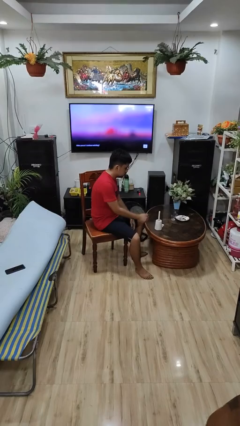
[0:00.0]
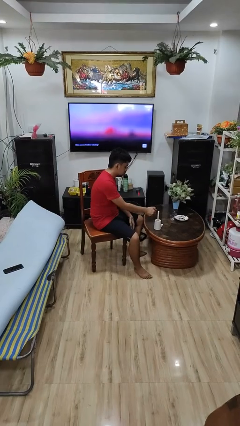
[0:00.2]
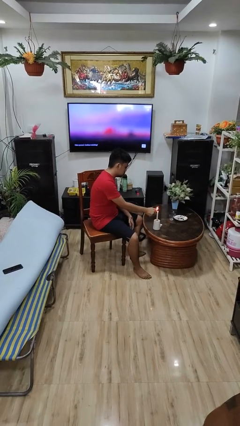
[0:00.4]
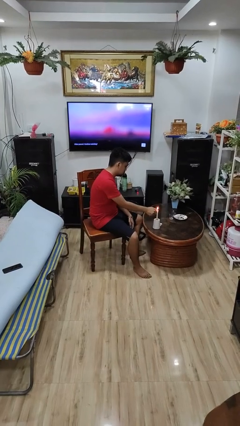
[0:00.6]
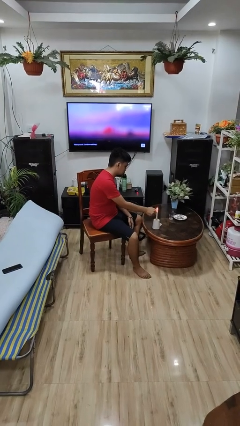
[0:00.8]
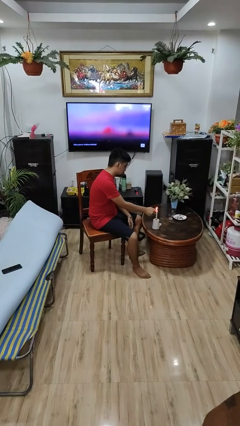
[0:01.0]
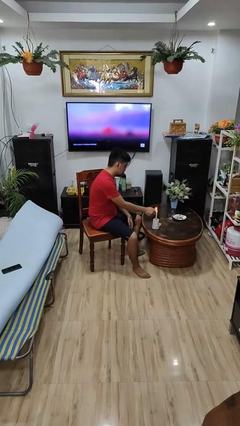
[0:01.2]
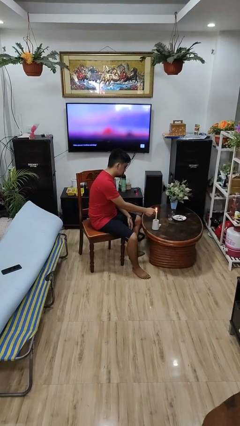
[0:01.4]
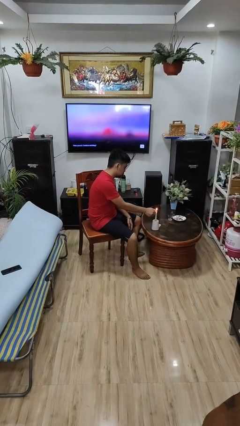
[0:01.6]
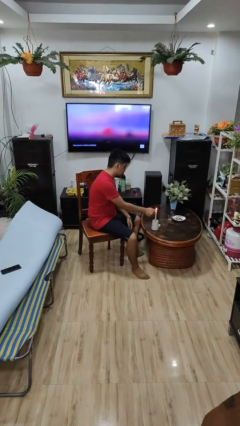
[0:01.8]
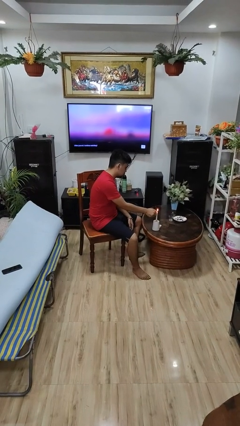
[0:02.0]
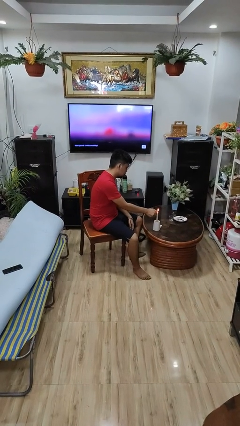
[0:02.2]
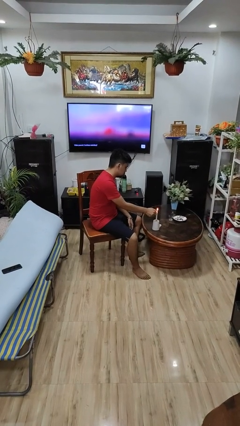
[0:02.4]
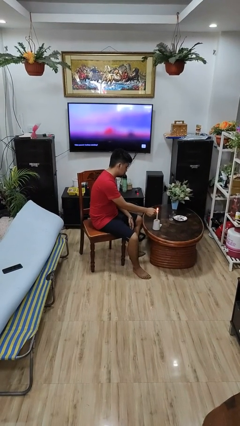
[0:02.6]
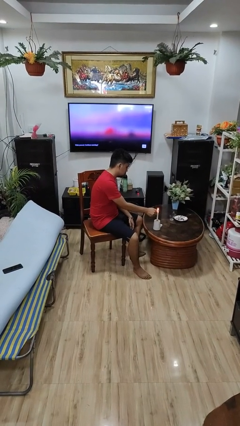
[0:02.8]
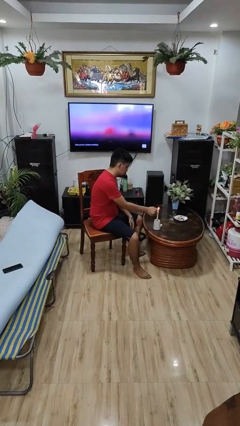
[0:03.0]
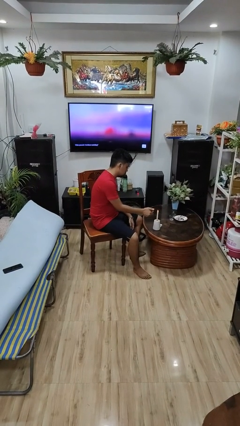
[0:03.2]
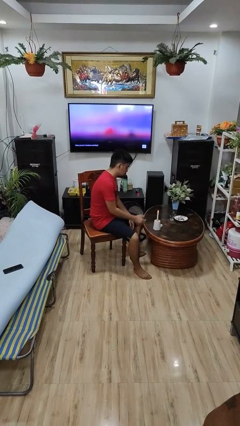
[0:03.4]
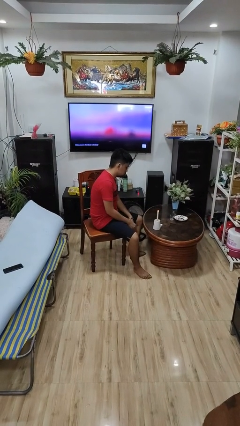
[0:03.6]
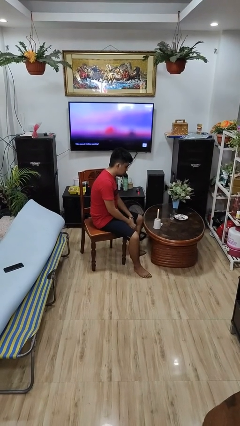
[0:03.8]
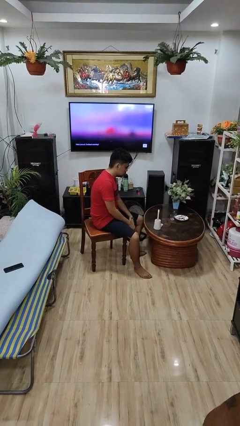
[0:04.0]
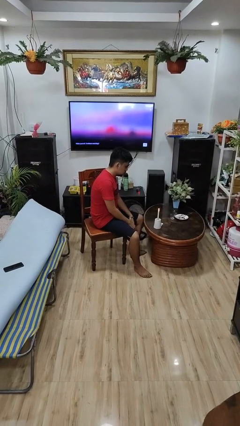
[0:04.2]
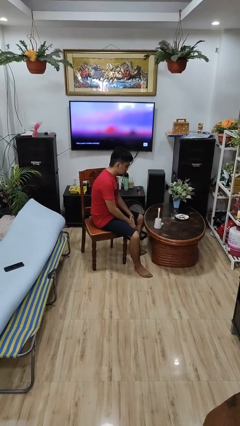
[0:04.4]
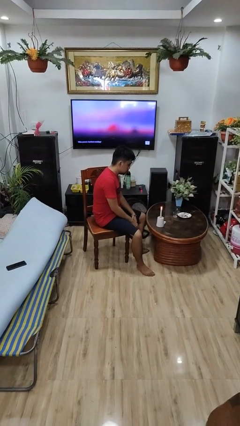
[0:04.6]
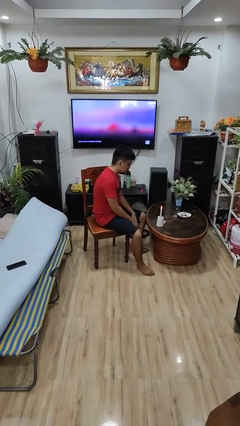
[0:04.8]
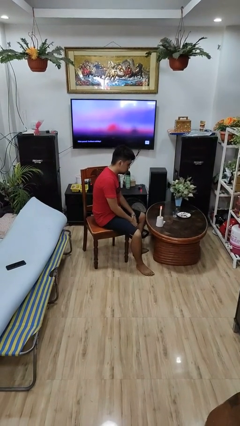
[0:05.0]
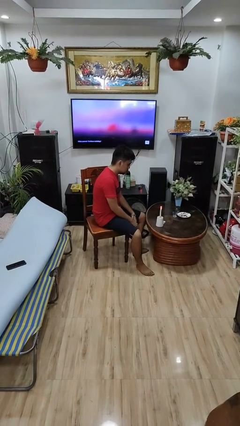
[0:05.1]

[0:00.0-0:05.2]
person lights candle

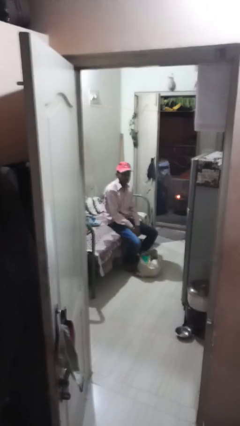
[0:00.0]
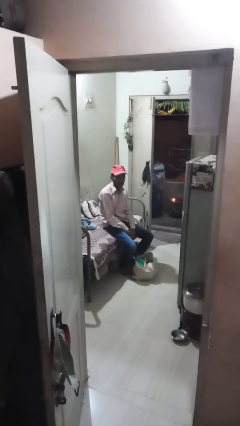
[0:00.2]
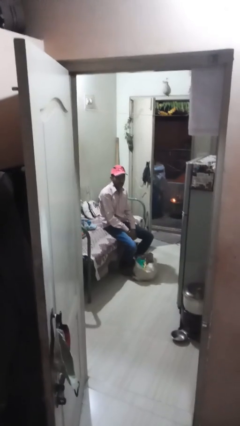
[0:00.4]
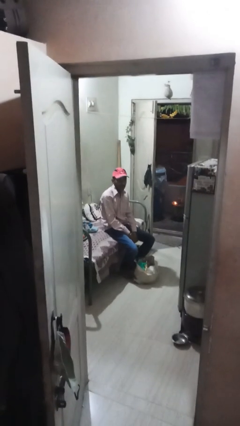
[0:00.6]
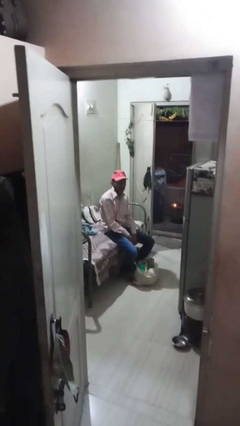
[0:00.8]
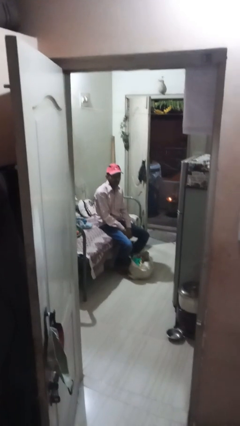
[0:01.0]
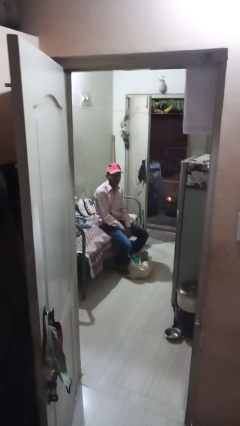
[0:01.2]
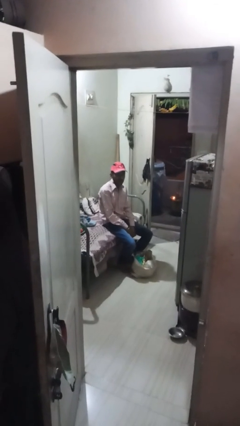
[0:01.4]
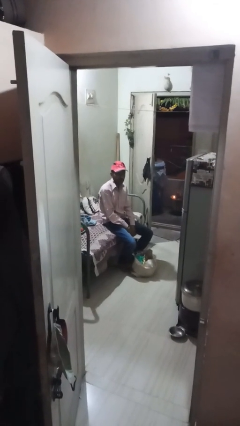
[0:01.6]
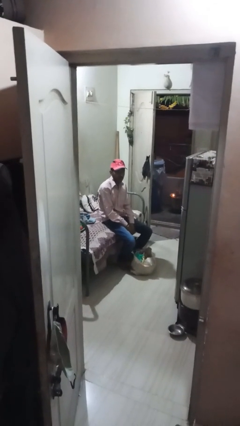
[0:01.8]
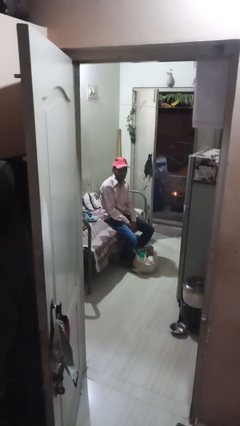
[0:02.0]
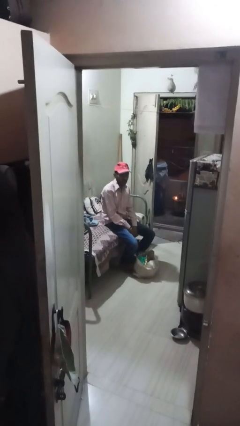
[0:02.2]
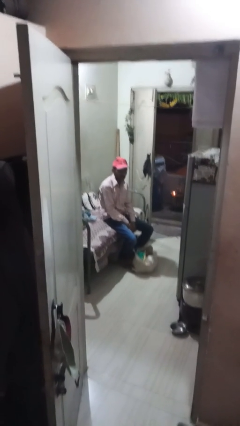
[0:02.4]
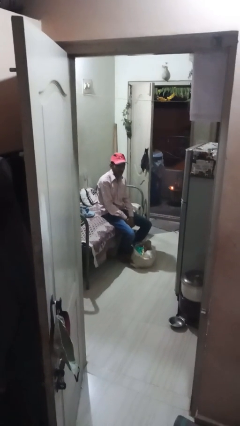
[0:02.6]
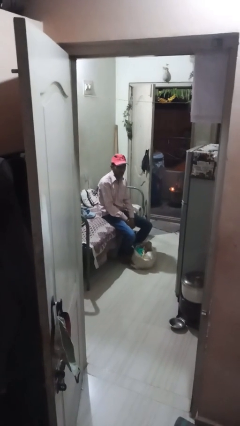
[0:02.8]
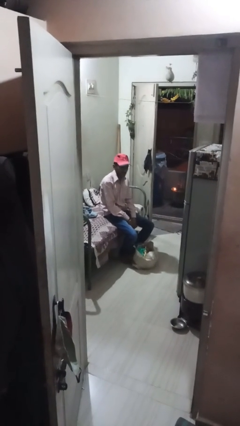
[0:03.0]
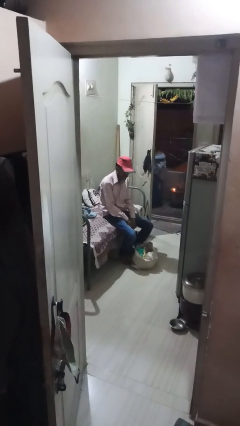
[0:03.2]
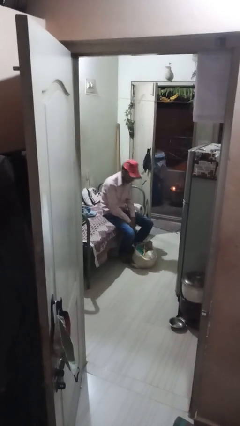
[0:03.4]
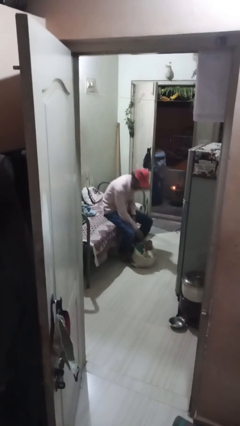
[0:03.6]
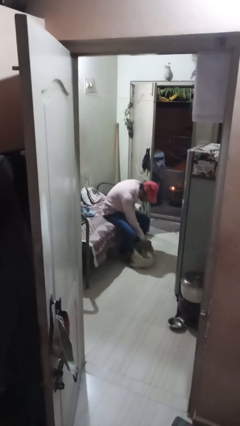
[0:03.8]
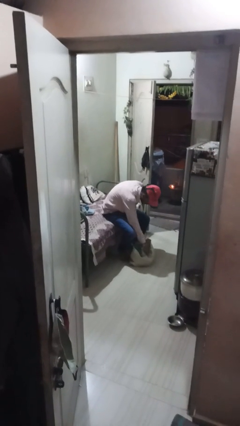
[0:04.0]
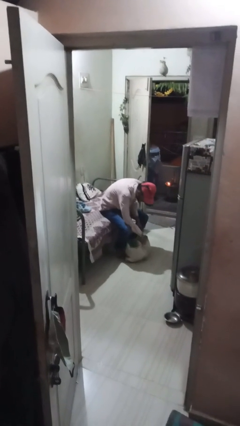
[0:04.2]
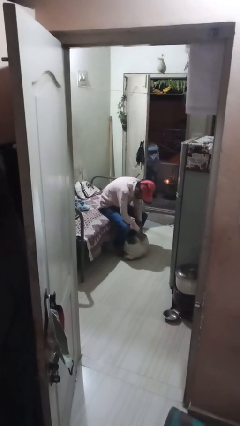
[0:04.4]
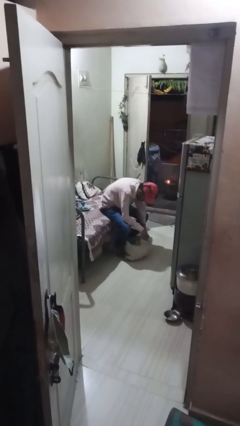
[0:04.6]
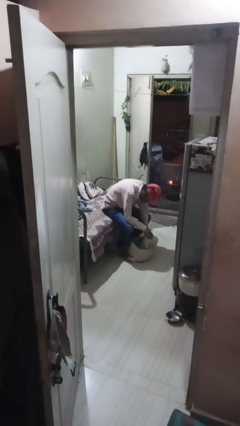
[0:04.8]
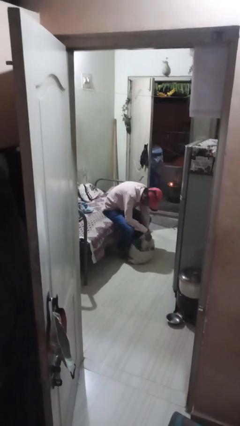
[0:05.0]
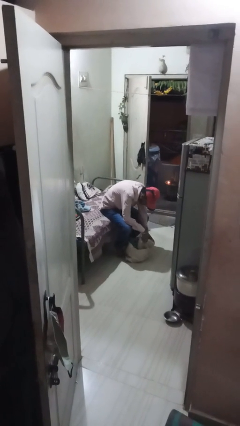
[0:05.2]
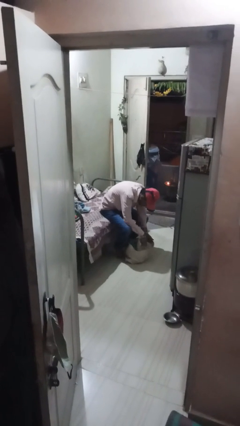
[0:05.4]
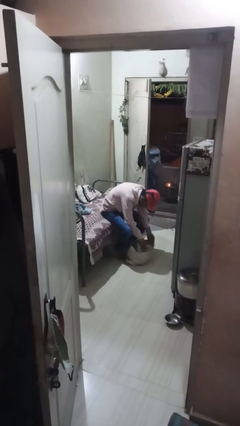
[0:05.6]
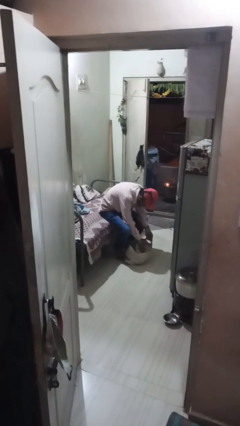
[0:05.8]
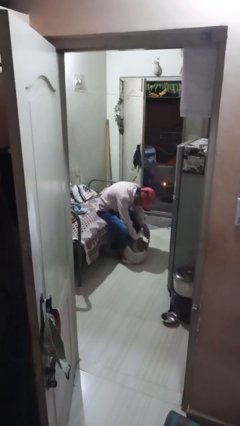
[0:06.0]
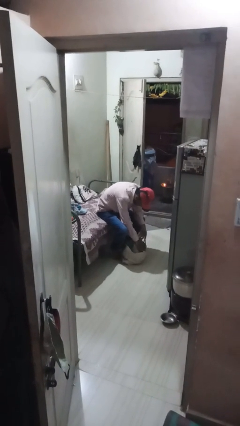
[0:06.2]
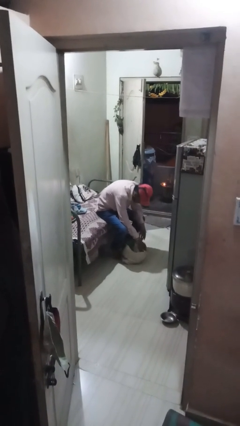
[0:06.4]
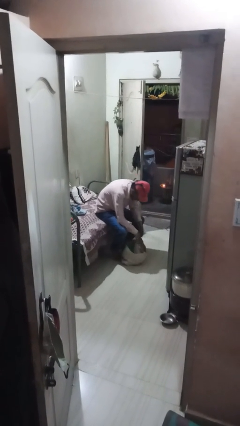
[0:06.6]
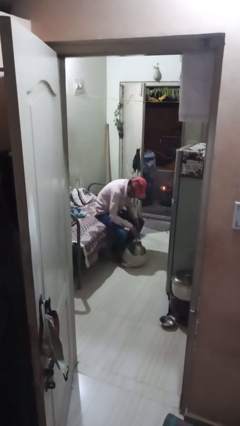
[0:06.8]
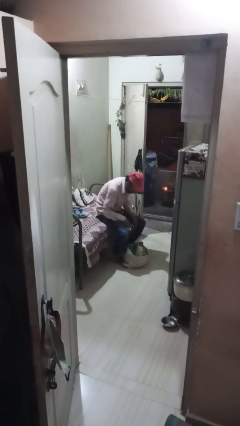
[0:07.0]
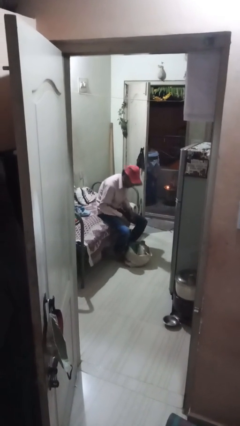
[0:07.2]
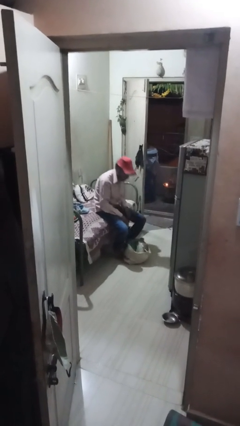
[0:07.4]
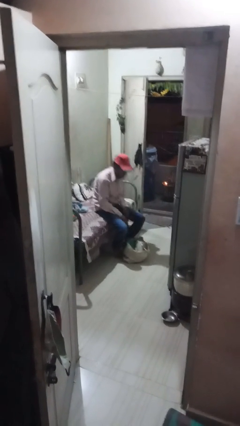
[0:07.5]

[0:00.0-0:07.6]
person searches in bag

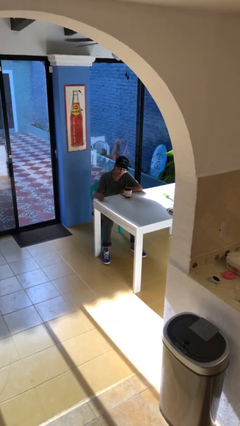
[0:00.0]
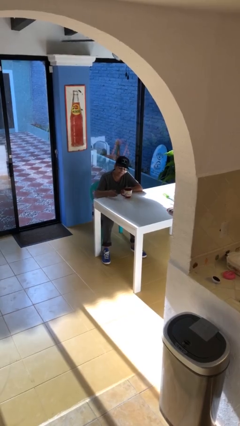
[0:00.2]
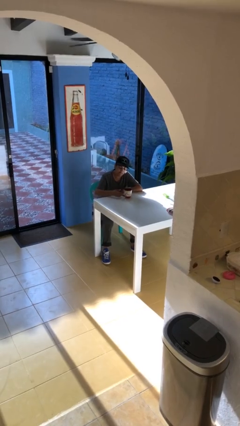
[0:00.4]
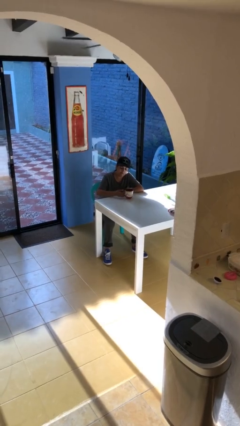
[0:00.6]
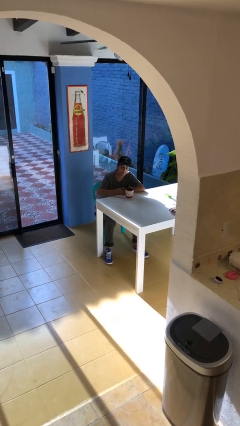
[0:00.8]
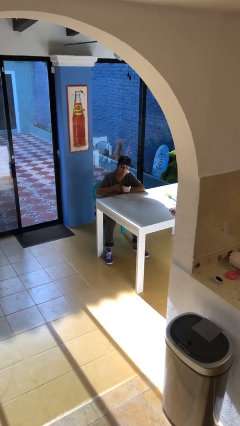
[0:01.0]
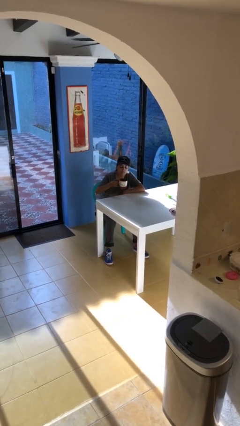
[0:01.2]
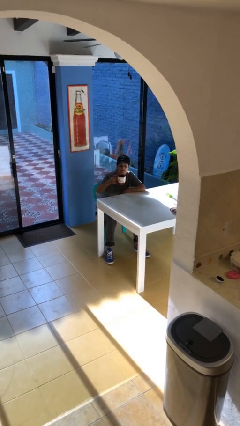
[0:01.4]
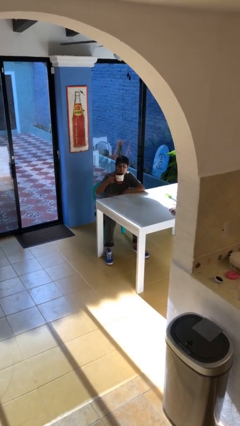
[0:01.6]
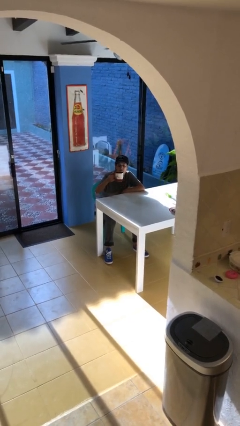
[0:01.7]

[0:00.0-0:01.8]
person picks up object from table

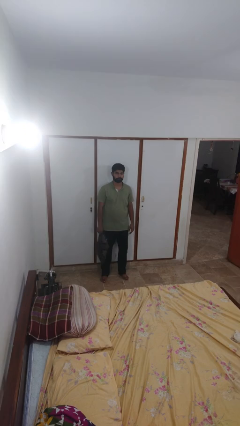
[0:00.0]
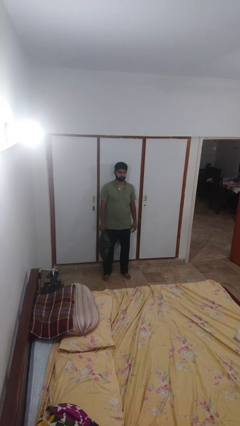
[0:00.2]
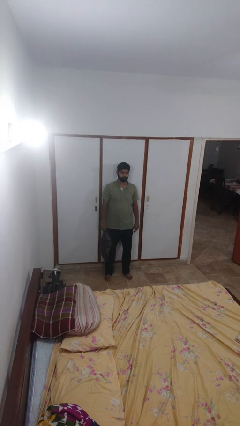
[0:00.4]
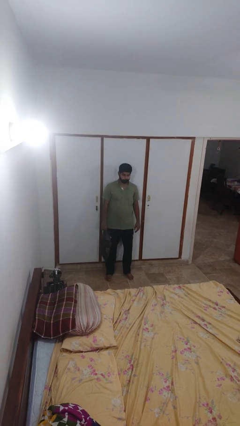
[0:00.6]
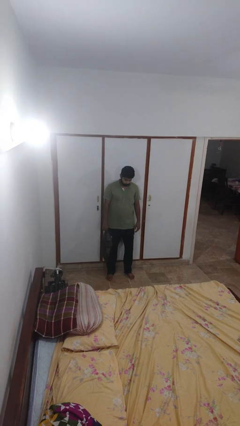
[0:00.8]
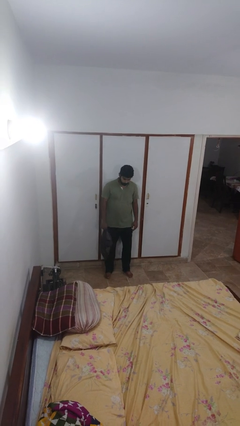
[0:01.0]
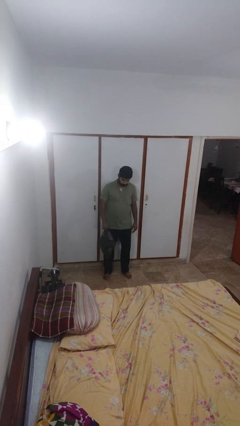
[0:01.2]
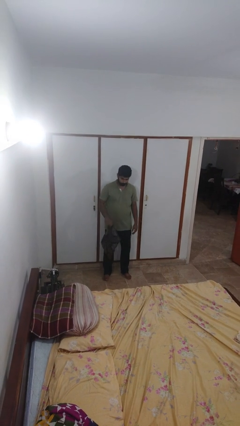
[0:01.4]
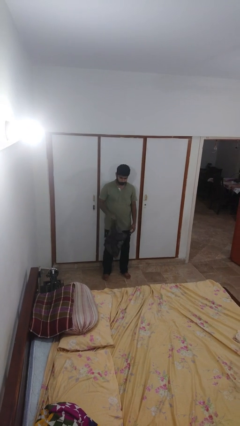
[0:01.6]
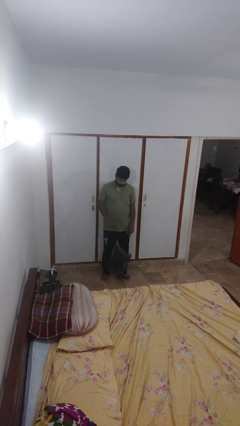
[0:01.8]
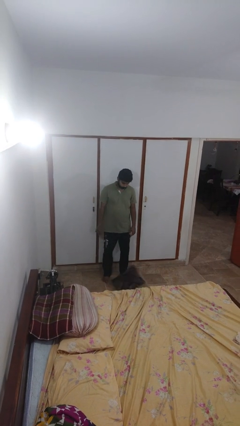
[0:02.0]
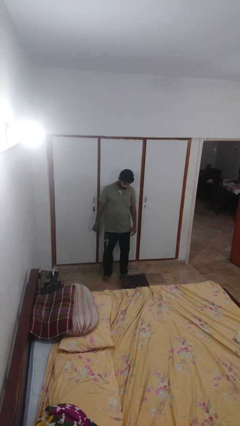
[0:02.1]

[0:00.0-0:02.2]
person drops object

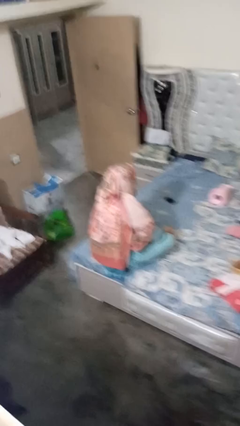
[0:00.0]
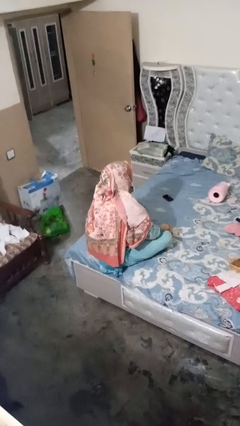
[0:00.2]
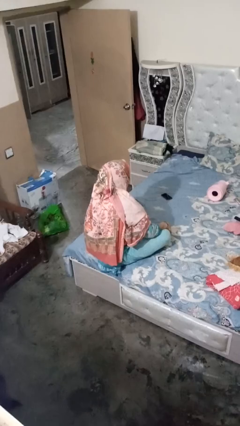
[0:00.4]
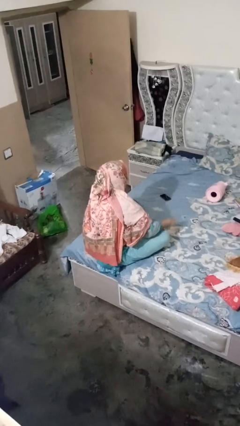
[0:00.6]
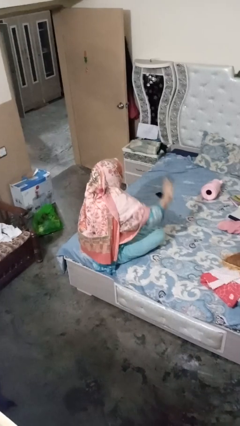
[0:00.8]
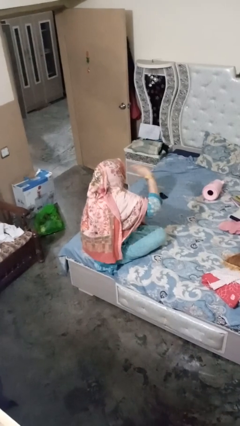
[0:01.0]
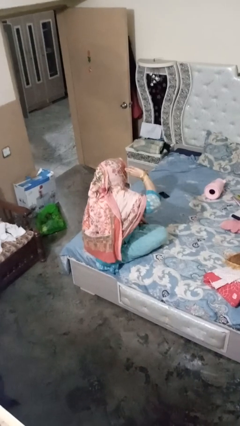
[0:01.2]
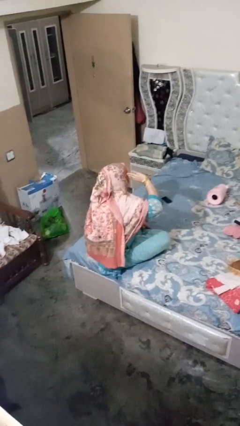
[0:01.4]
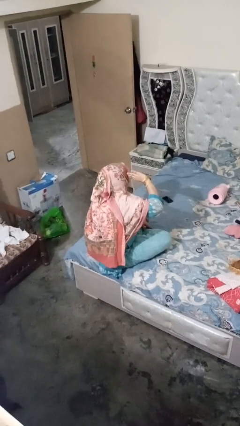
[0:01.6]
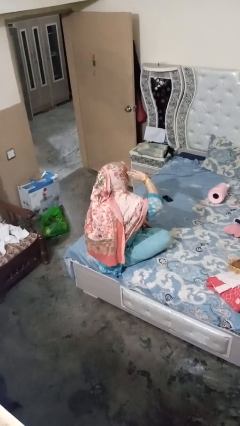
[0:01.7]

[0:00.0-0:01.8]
person salutes
